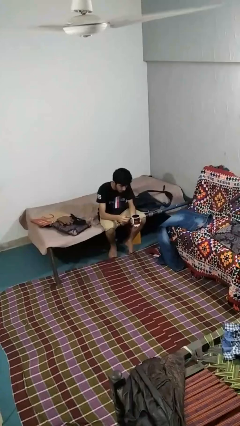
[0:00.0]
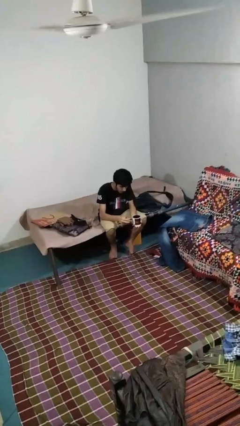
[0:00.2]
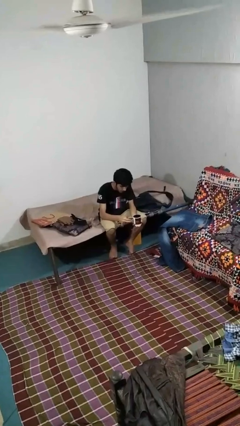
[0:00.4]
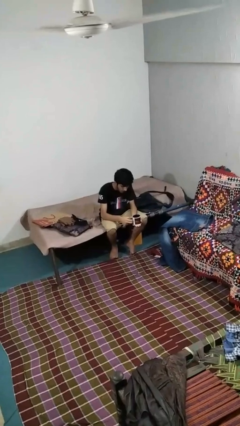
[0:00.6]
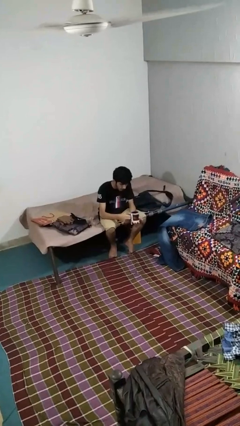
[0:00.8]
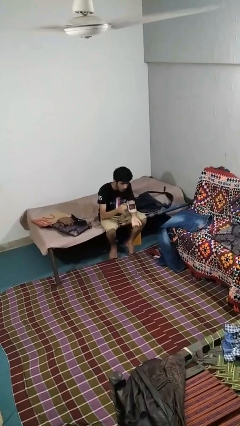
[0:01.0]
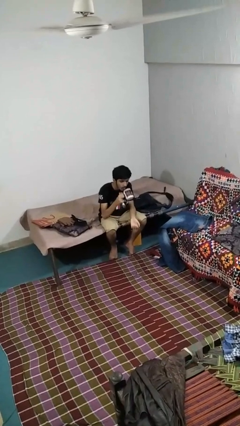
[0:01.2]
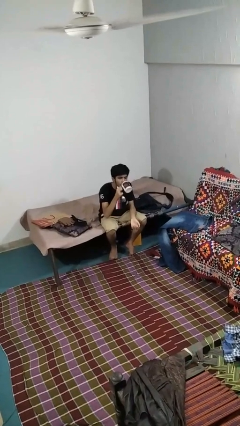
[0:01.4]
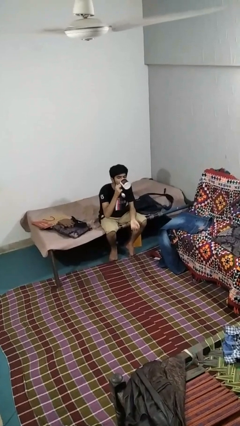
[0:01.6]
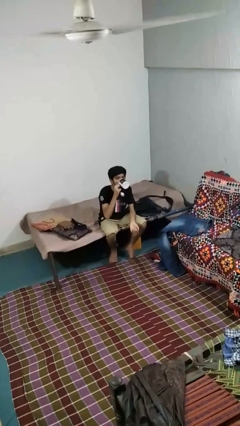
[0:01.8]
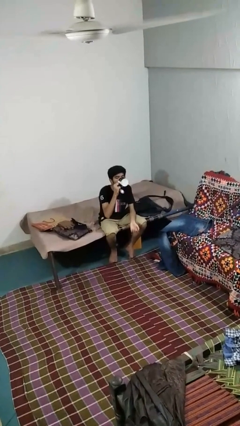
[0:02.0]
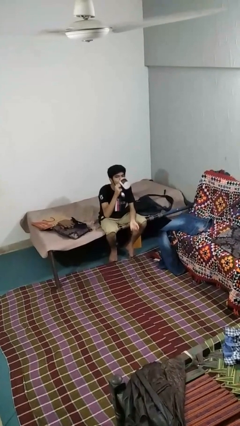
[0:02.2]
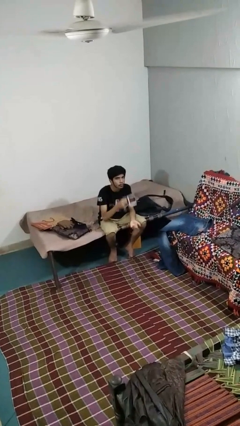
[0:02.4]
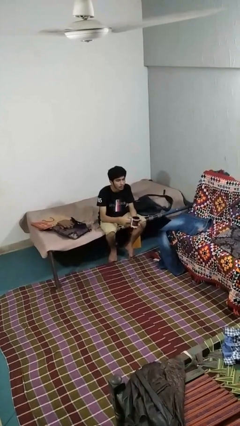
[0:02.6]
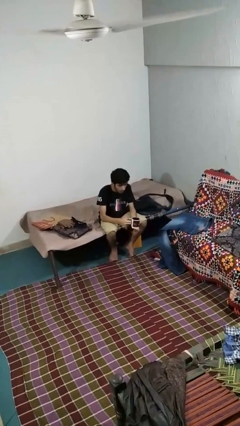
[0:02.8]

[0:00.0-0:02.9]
person drinks from mug

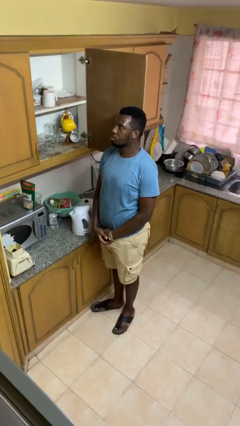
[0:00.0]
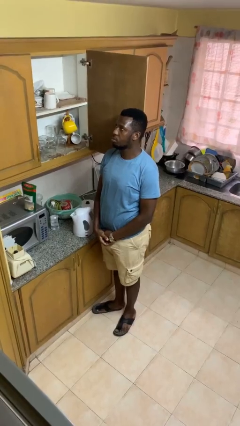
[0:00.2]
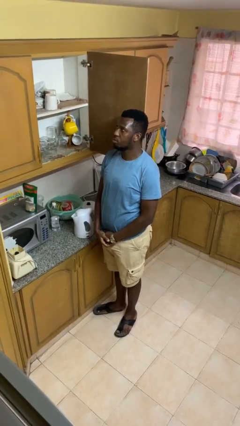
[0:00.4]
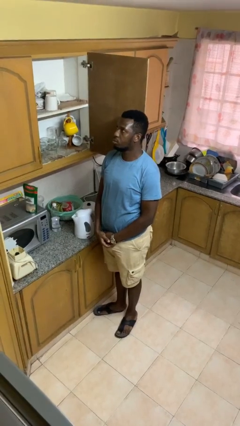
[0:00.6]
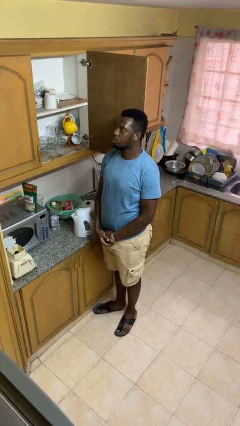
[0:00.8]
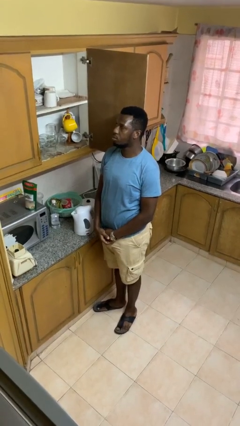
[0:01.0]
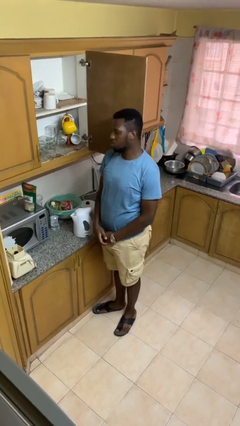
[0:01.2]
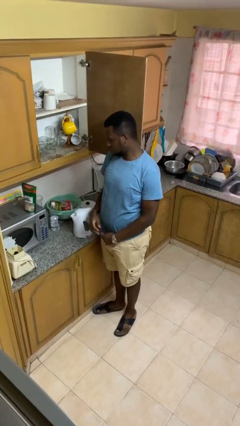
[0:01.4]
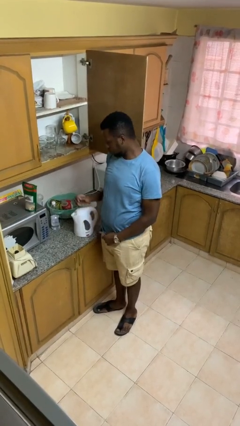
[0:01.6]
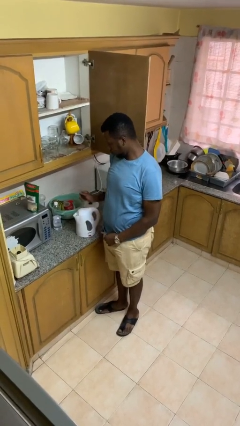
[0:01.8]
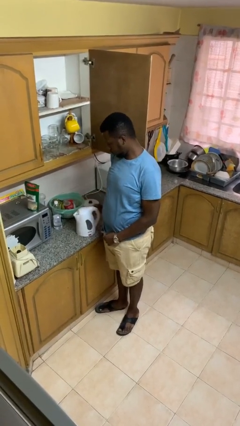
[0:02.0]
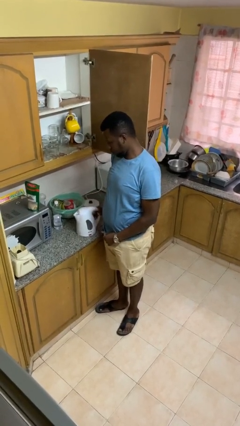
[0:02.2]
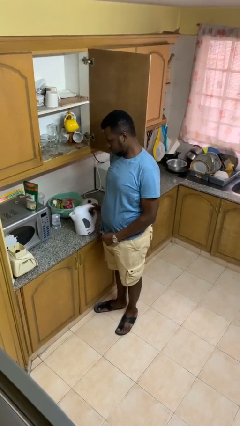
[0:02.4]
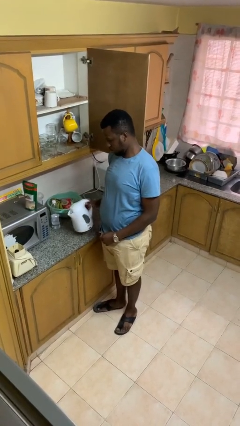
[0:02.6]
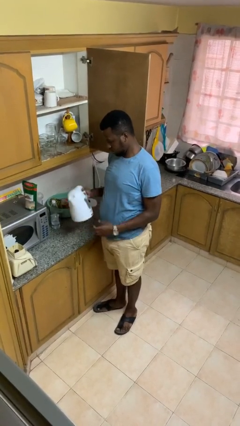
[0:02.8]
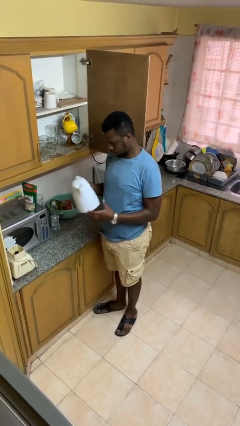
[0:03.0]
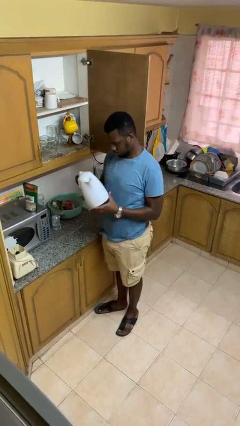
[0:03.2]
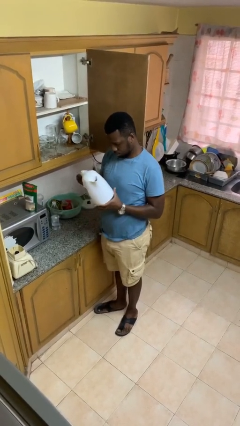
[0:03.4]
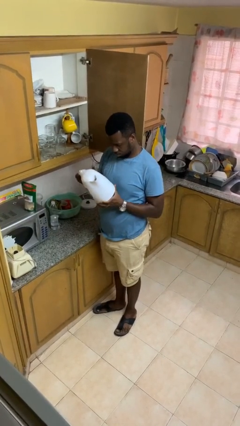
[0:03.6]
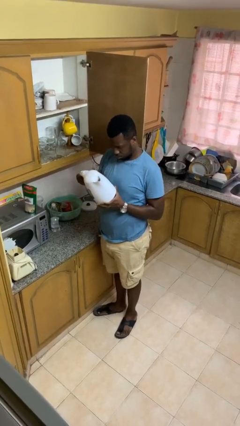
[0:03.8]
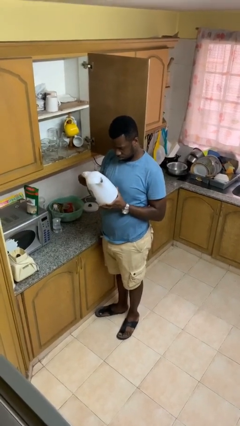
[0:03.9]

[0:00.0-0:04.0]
person picks up object from table

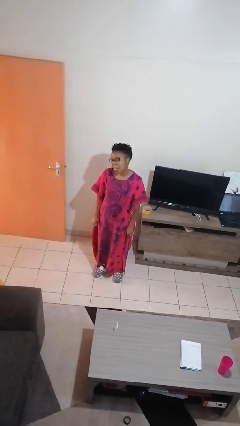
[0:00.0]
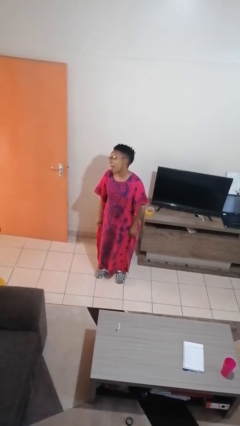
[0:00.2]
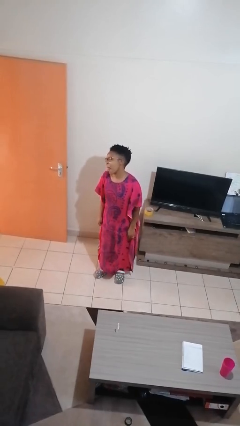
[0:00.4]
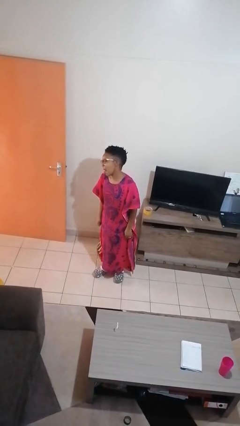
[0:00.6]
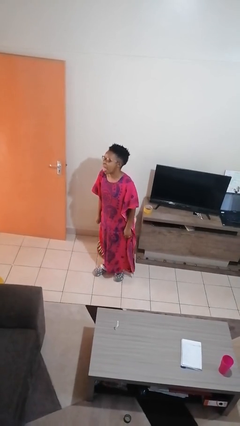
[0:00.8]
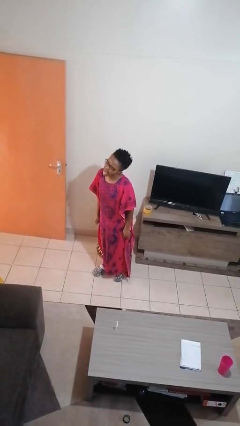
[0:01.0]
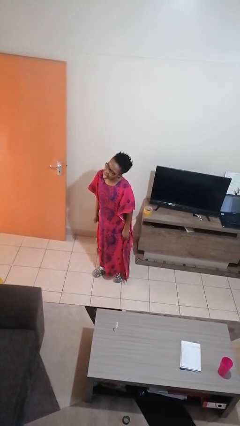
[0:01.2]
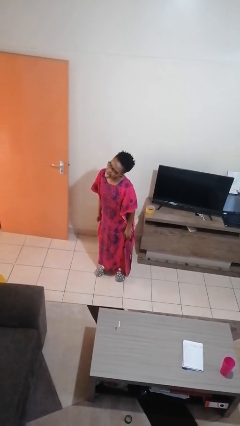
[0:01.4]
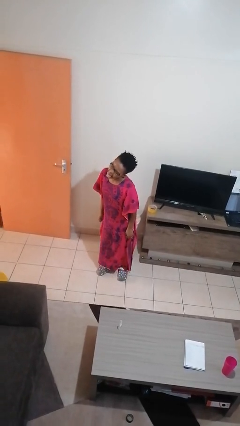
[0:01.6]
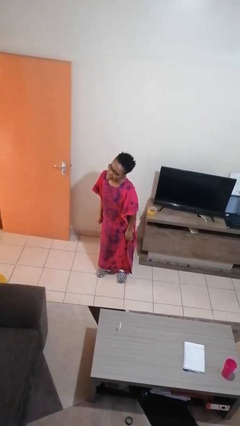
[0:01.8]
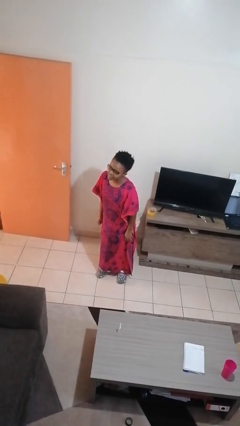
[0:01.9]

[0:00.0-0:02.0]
person sticks out tongue

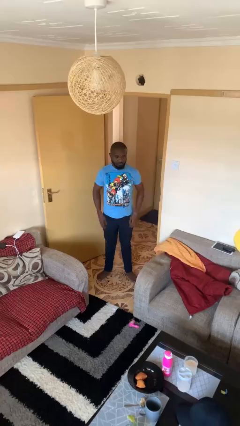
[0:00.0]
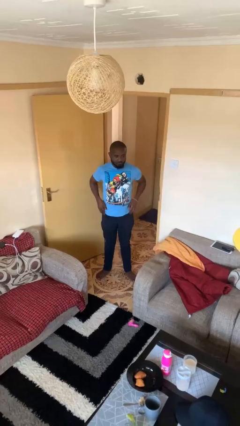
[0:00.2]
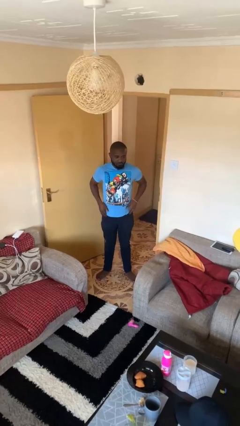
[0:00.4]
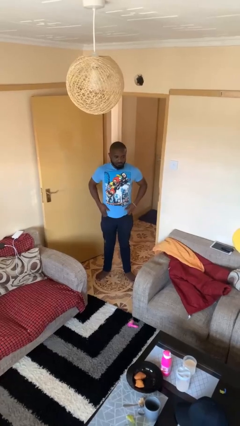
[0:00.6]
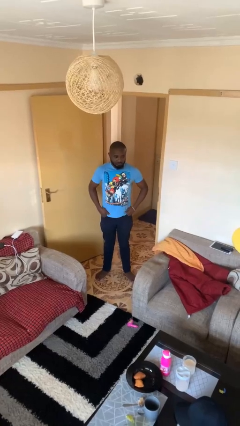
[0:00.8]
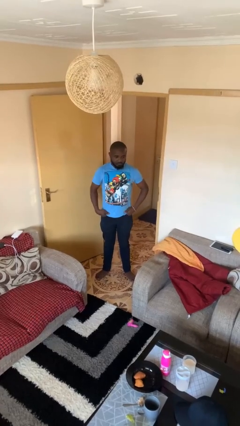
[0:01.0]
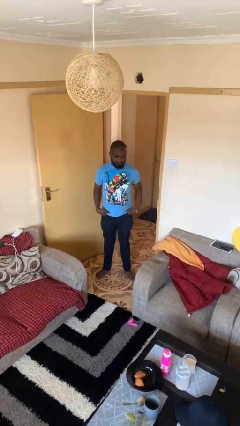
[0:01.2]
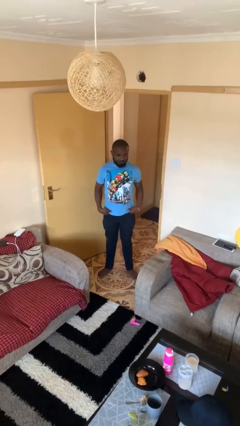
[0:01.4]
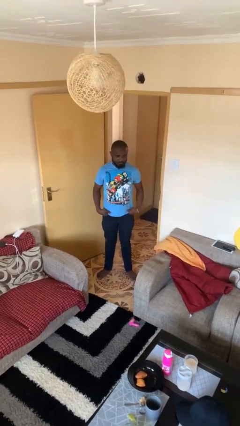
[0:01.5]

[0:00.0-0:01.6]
person puts hands in back pockets

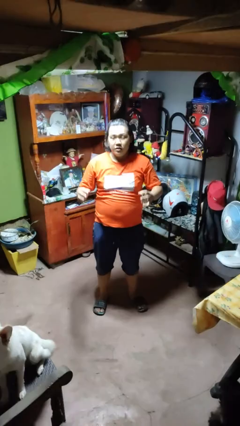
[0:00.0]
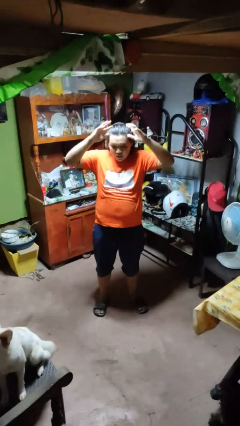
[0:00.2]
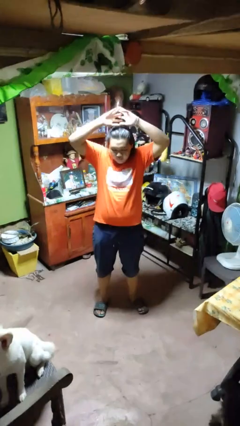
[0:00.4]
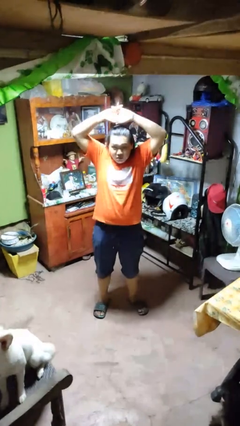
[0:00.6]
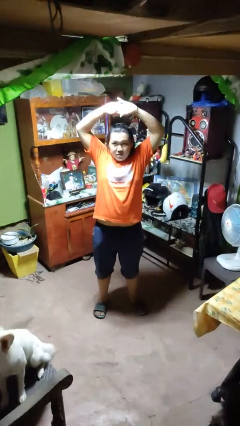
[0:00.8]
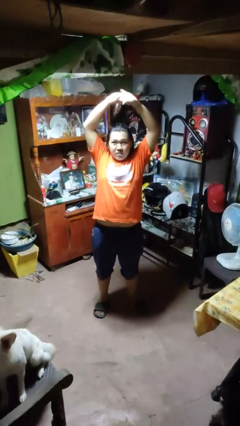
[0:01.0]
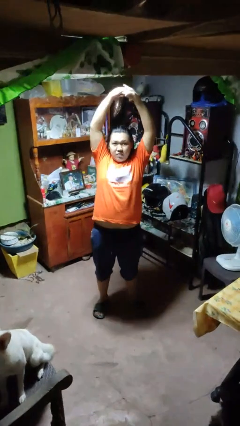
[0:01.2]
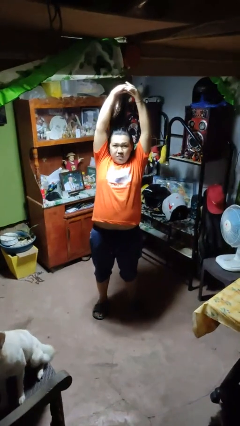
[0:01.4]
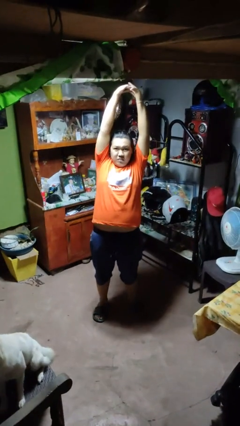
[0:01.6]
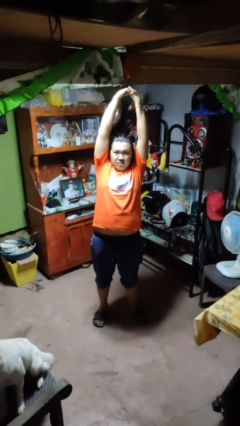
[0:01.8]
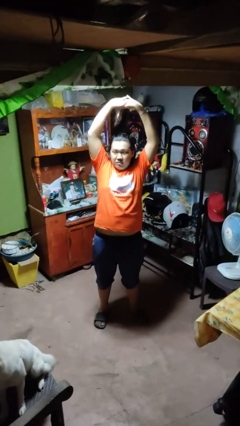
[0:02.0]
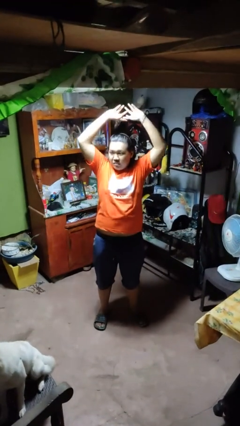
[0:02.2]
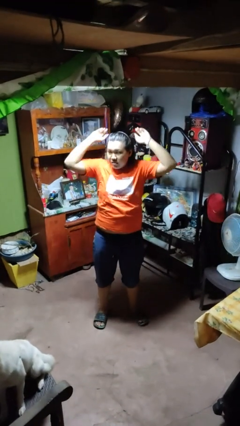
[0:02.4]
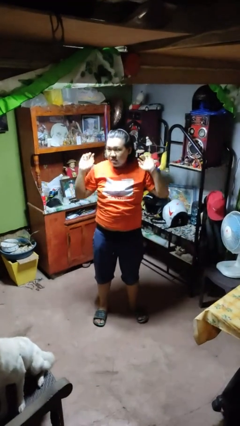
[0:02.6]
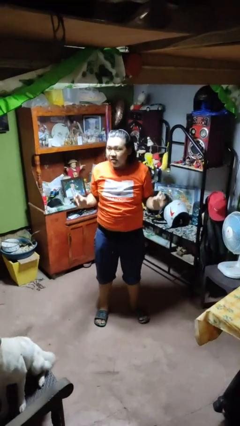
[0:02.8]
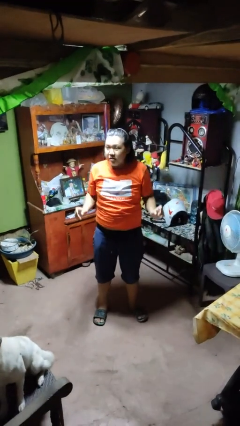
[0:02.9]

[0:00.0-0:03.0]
person stretches arms over head

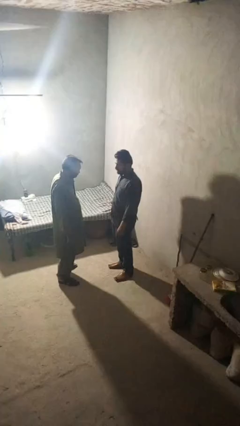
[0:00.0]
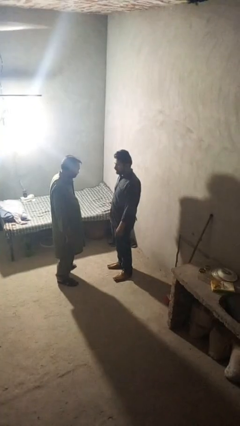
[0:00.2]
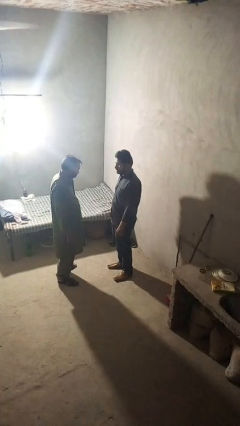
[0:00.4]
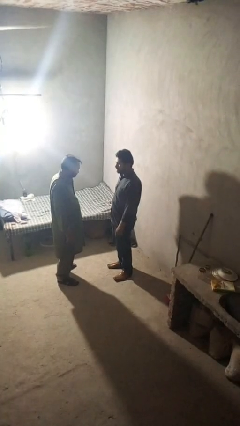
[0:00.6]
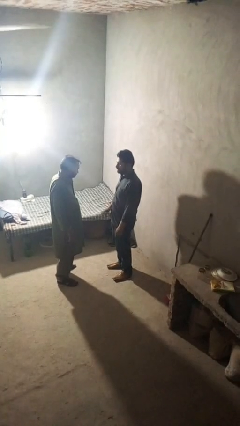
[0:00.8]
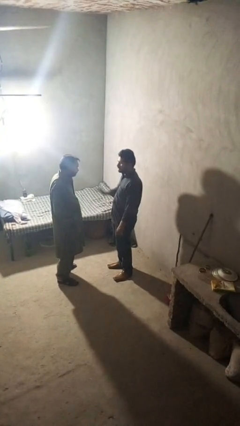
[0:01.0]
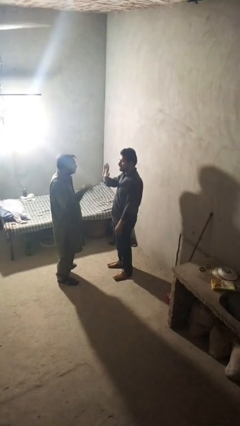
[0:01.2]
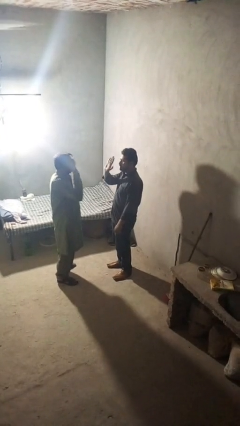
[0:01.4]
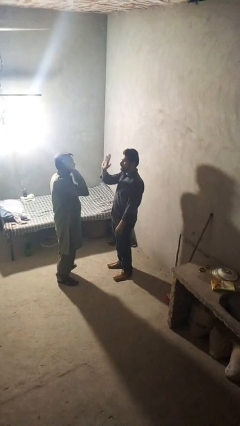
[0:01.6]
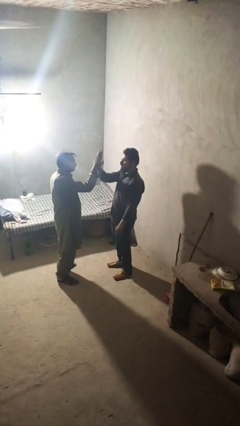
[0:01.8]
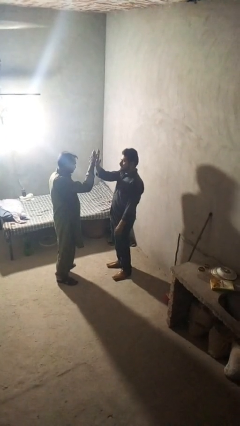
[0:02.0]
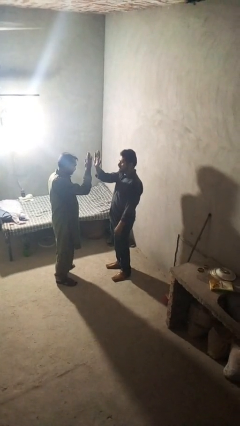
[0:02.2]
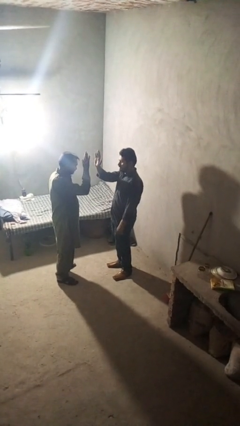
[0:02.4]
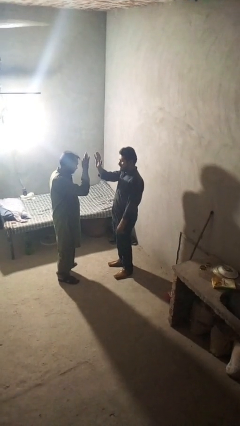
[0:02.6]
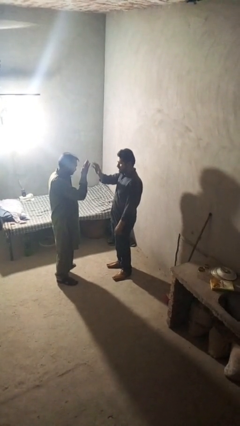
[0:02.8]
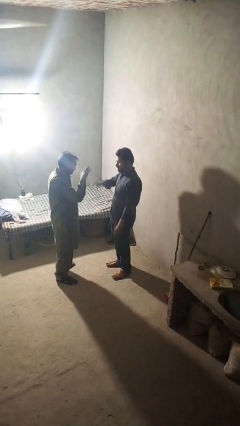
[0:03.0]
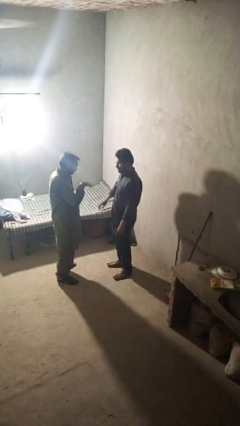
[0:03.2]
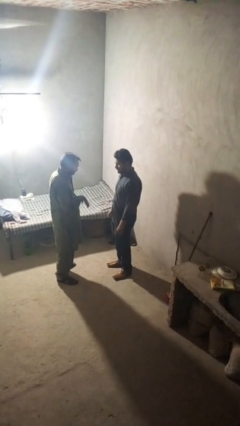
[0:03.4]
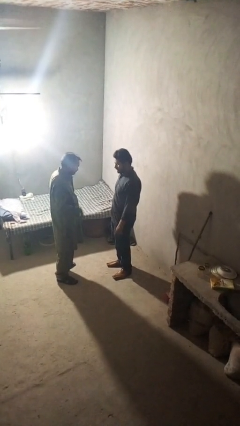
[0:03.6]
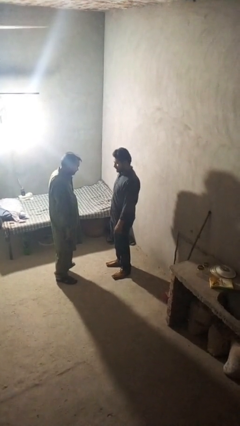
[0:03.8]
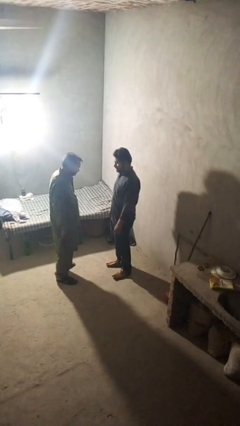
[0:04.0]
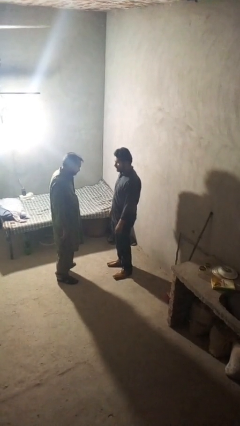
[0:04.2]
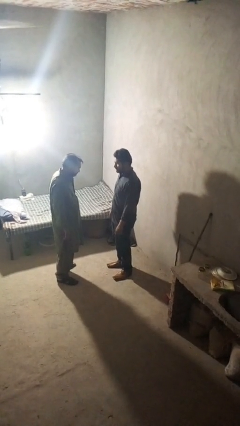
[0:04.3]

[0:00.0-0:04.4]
person highfives hand
